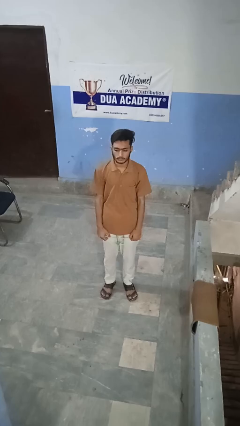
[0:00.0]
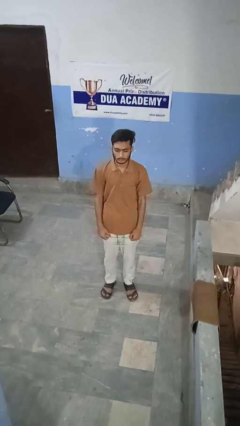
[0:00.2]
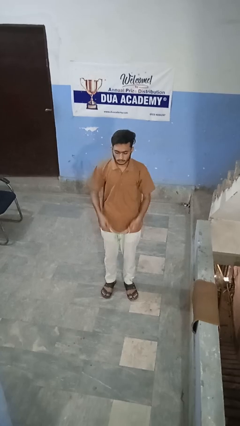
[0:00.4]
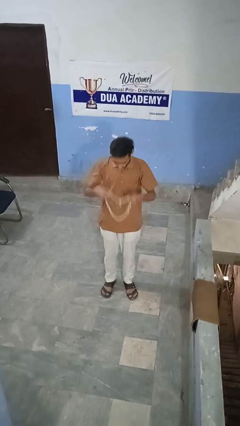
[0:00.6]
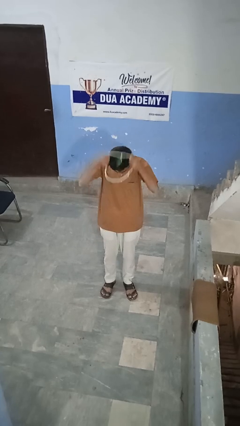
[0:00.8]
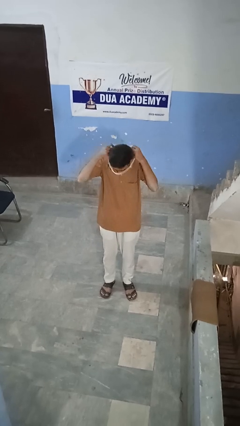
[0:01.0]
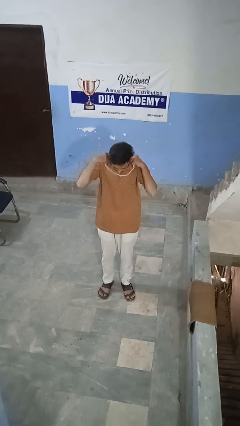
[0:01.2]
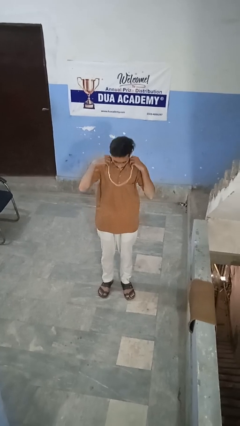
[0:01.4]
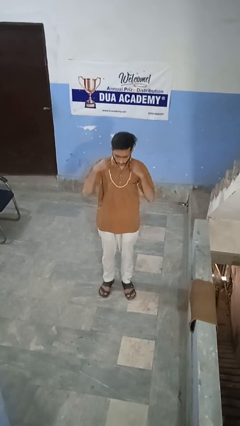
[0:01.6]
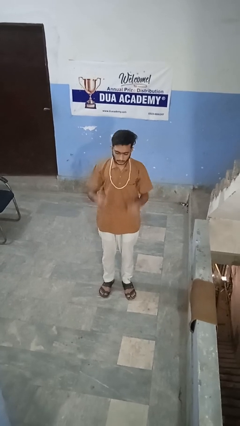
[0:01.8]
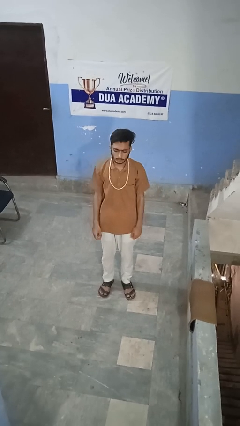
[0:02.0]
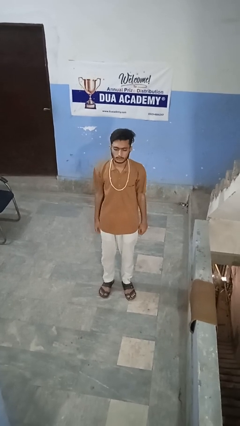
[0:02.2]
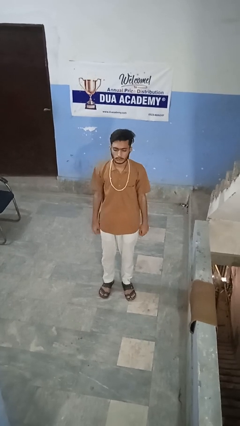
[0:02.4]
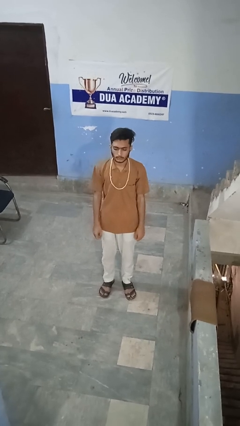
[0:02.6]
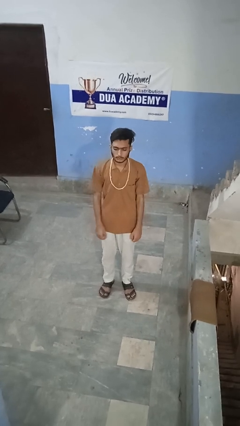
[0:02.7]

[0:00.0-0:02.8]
person puts on necklace

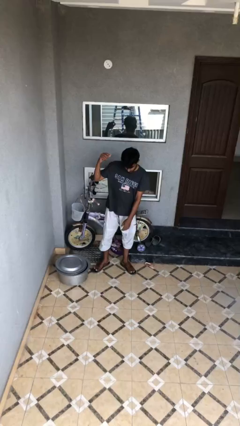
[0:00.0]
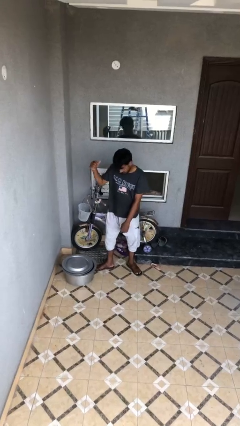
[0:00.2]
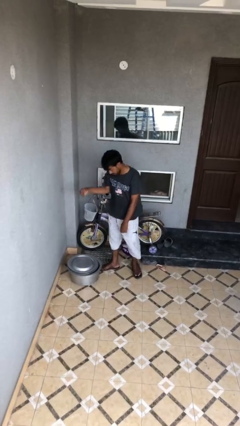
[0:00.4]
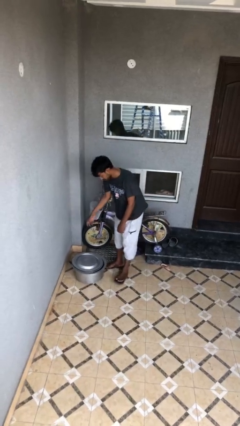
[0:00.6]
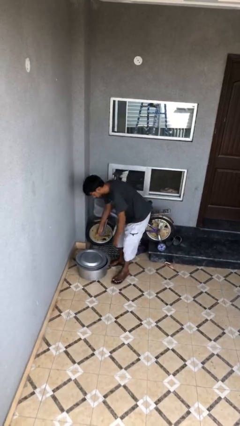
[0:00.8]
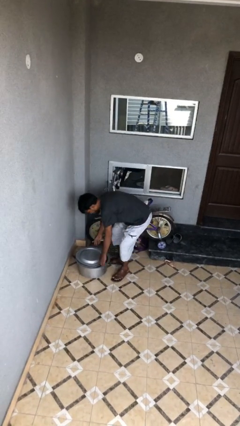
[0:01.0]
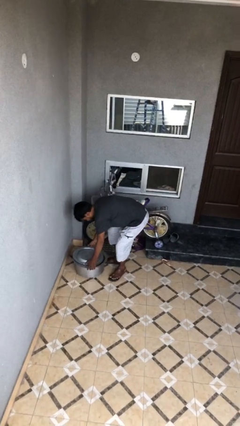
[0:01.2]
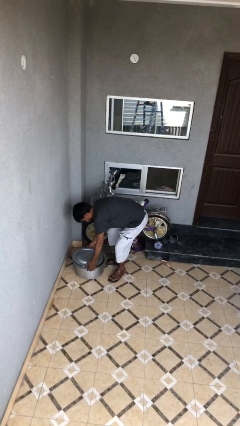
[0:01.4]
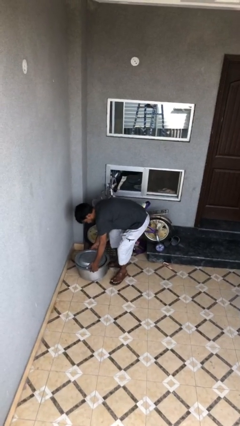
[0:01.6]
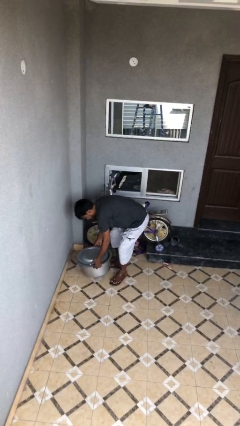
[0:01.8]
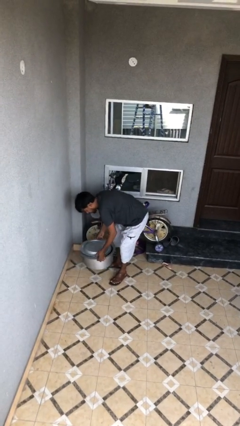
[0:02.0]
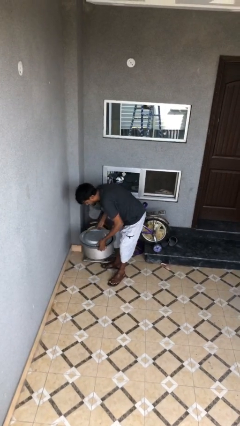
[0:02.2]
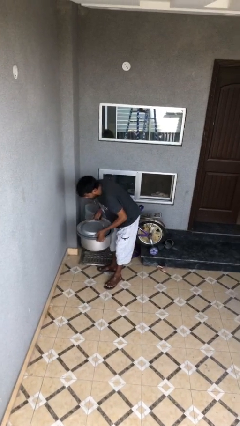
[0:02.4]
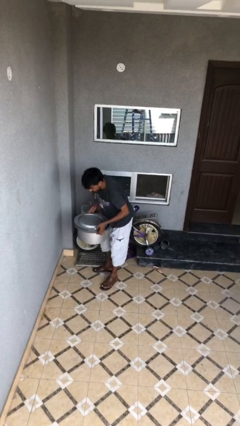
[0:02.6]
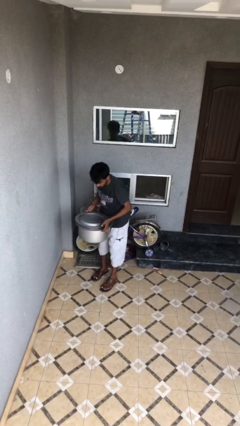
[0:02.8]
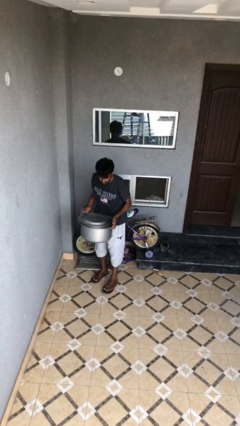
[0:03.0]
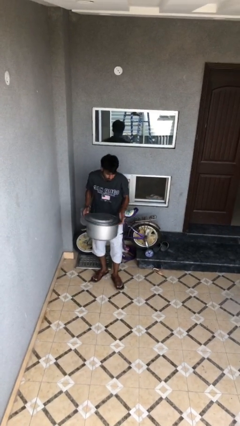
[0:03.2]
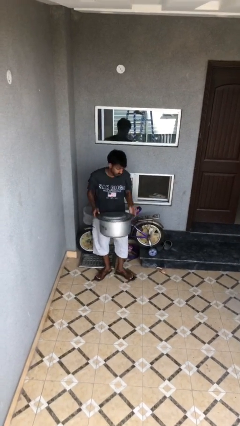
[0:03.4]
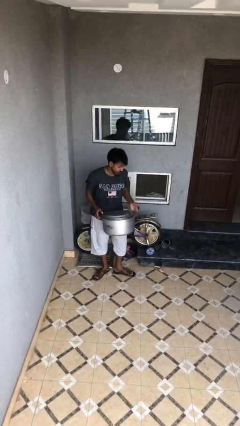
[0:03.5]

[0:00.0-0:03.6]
person picks up object from floor

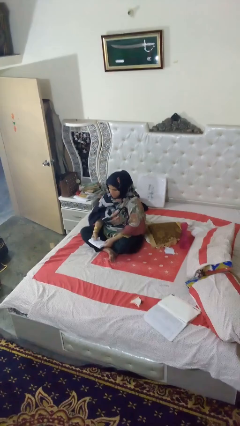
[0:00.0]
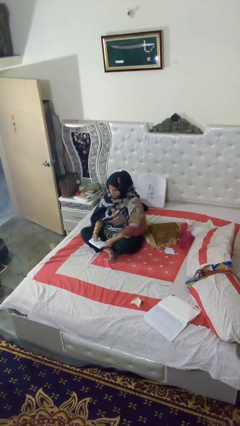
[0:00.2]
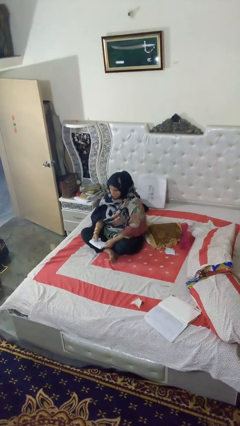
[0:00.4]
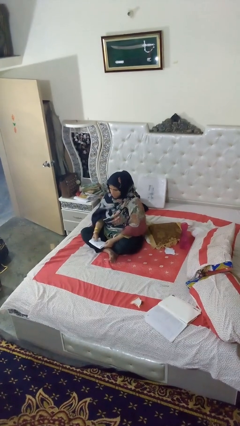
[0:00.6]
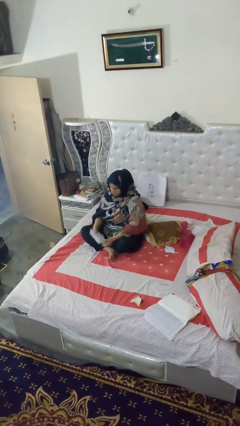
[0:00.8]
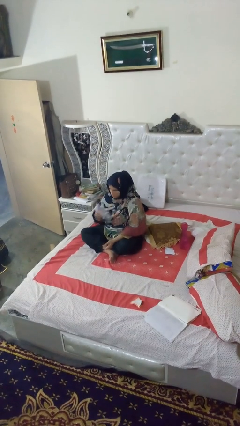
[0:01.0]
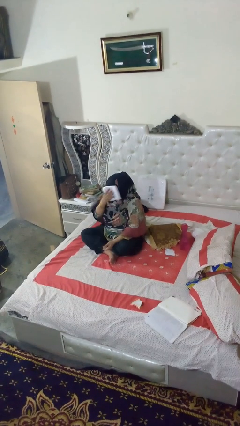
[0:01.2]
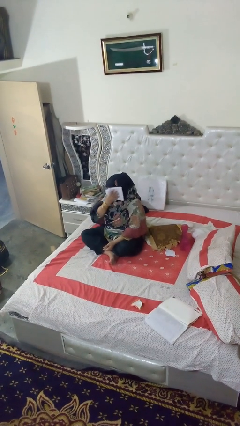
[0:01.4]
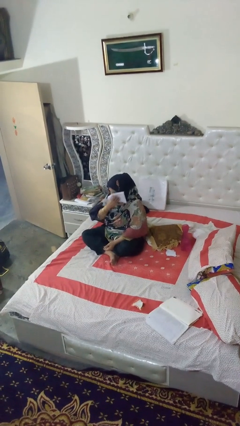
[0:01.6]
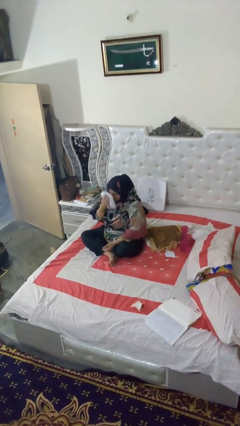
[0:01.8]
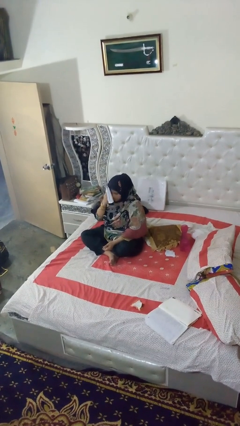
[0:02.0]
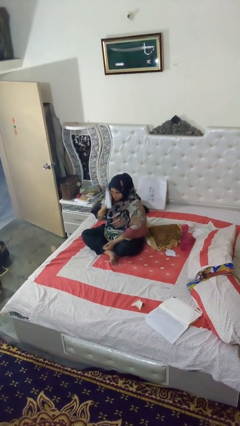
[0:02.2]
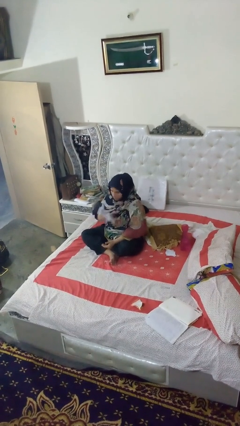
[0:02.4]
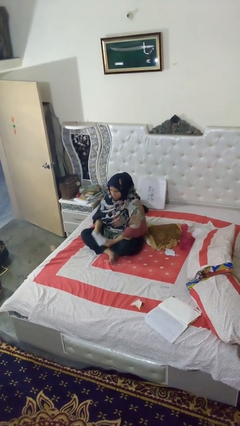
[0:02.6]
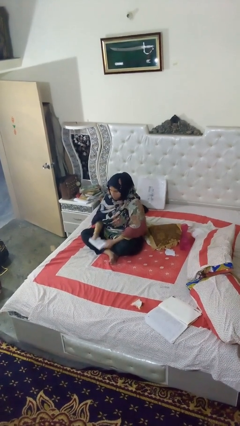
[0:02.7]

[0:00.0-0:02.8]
person wipes mouth with napkin

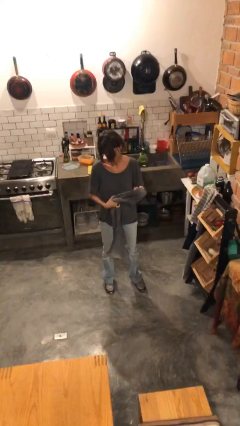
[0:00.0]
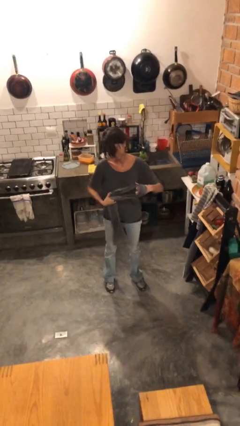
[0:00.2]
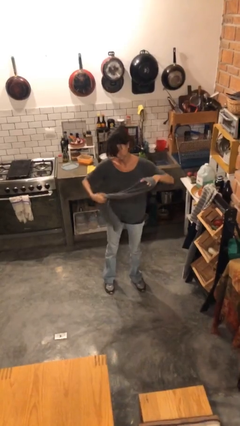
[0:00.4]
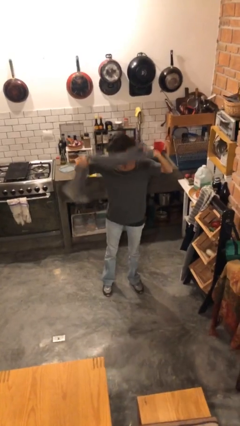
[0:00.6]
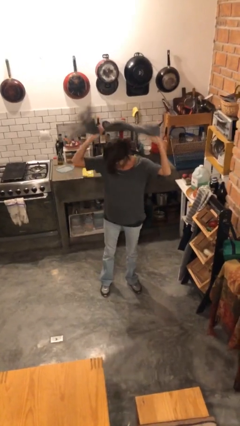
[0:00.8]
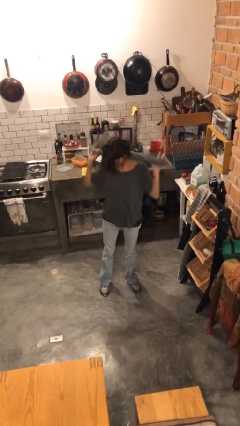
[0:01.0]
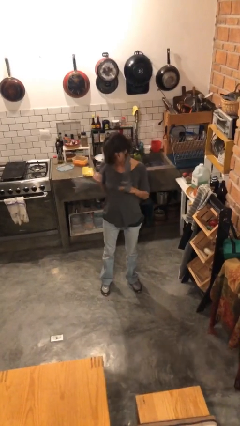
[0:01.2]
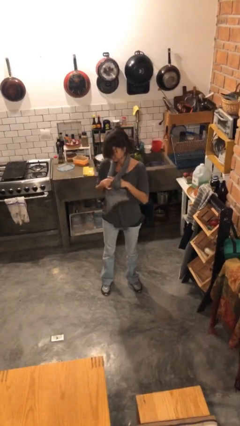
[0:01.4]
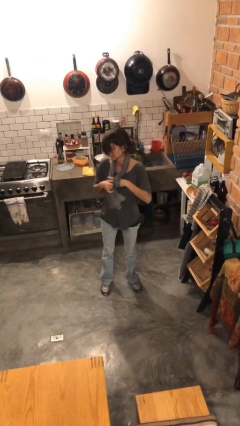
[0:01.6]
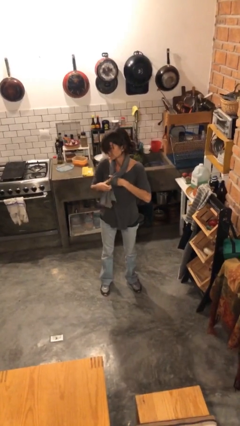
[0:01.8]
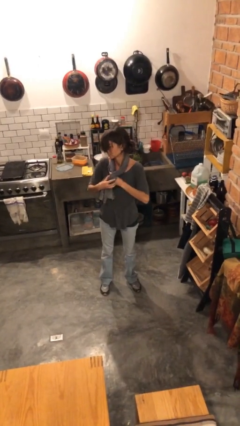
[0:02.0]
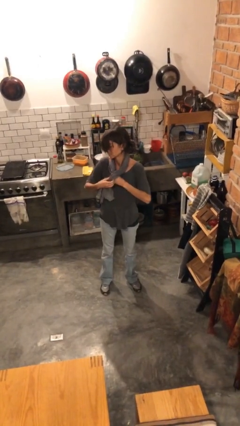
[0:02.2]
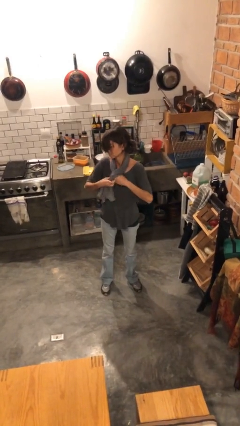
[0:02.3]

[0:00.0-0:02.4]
person puts on scarf

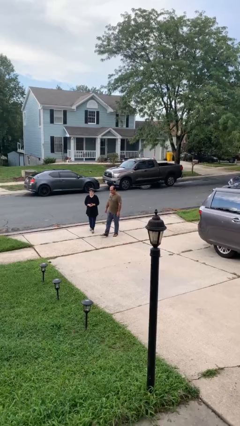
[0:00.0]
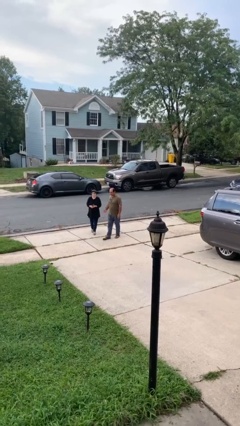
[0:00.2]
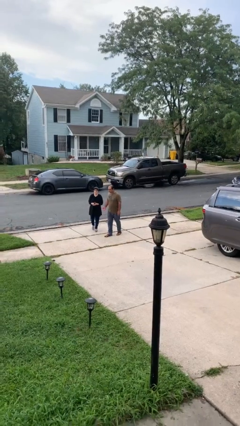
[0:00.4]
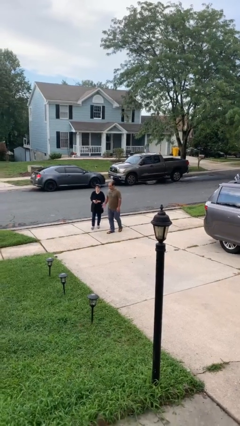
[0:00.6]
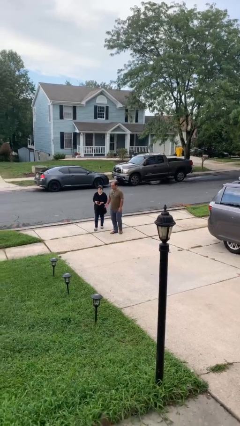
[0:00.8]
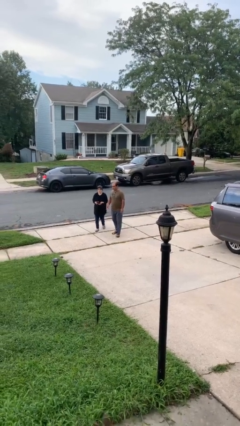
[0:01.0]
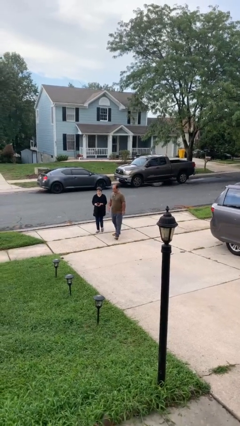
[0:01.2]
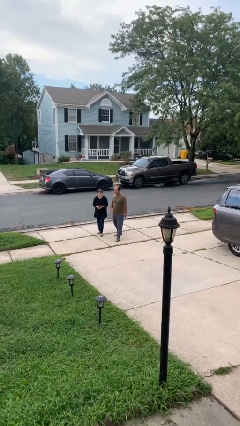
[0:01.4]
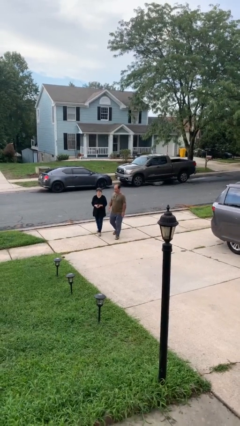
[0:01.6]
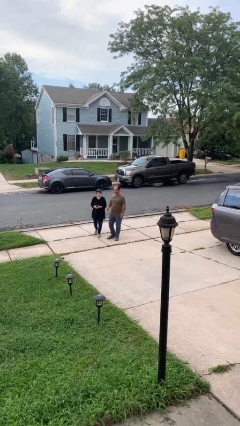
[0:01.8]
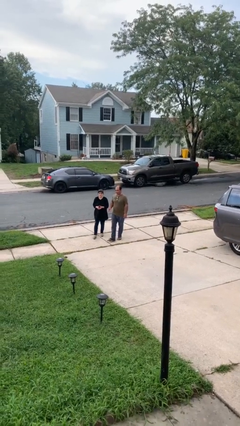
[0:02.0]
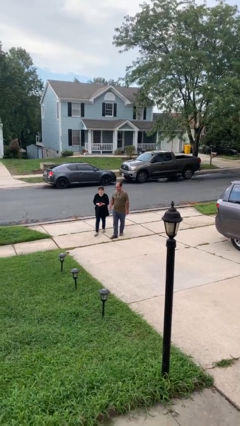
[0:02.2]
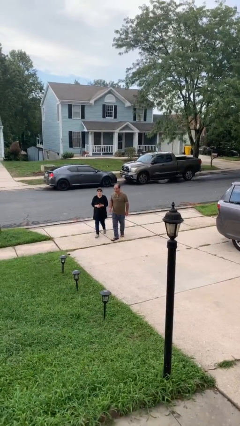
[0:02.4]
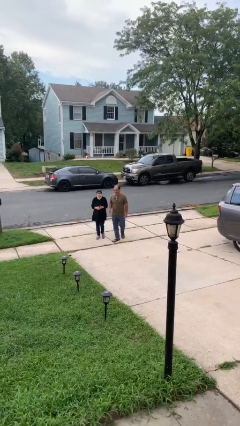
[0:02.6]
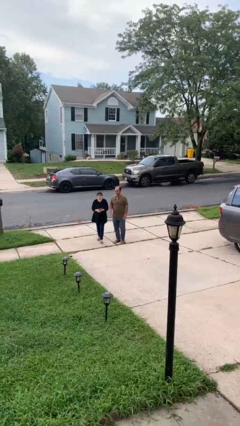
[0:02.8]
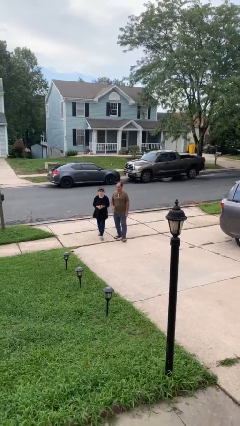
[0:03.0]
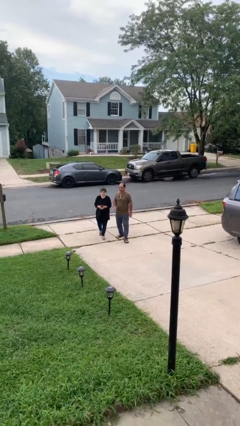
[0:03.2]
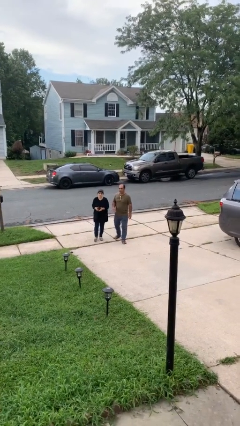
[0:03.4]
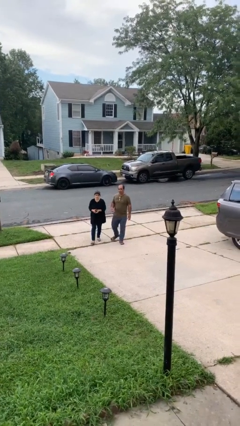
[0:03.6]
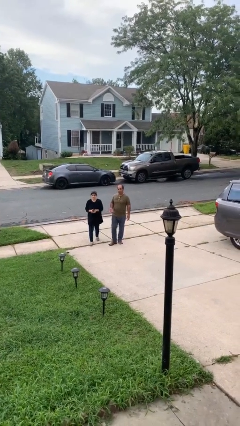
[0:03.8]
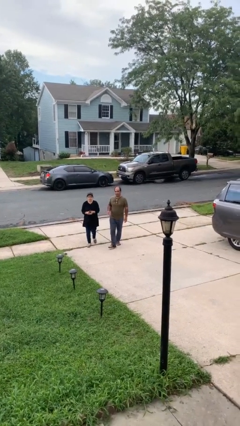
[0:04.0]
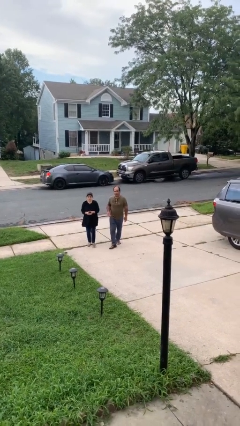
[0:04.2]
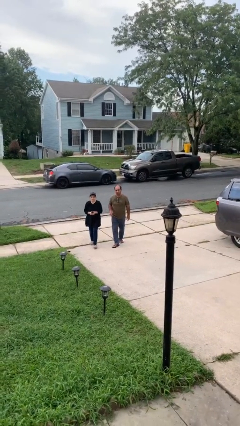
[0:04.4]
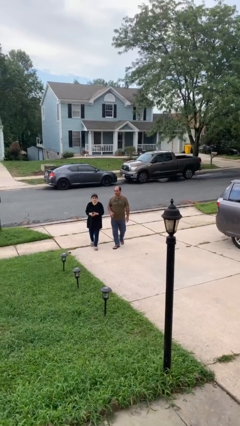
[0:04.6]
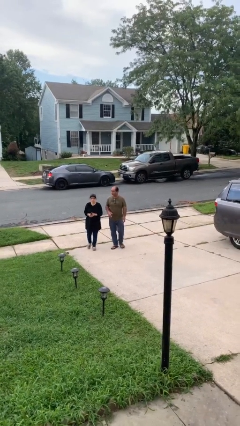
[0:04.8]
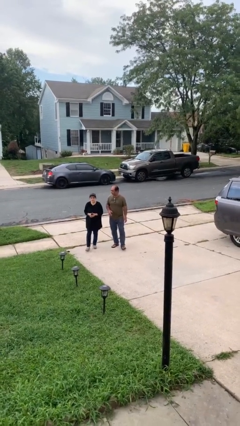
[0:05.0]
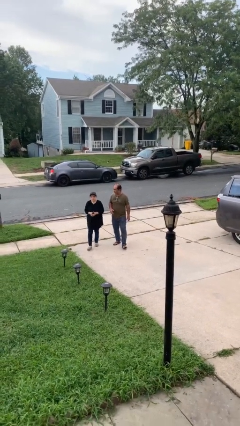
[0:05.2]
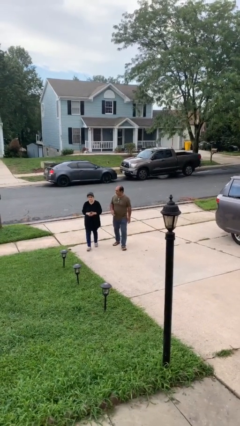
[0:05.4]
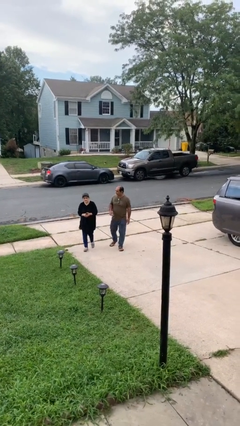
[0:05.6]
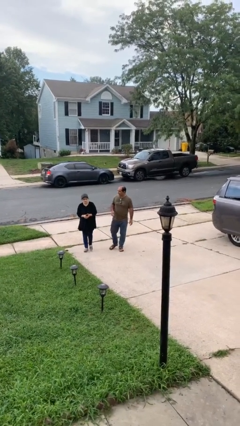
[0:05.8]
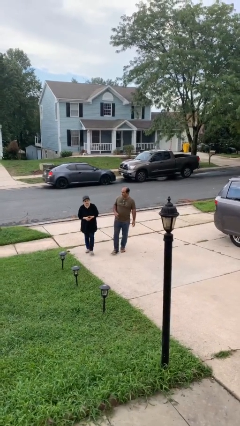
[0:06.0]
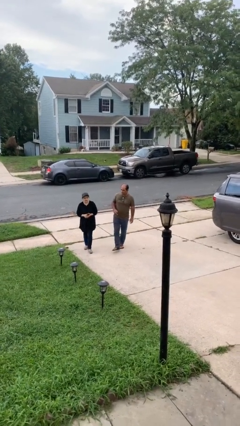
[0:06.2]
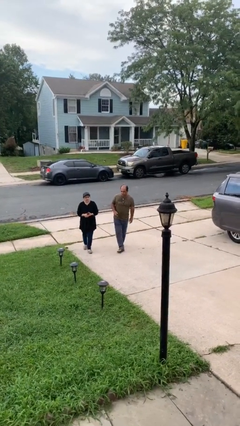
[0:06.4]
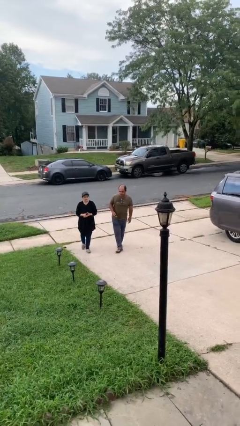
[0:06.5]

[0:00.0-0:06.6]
person talks to person
